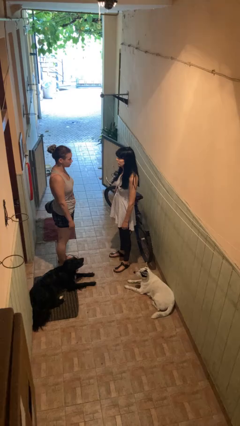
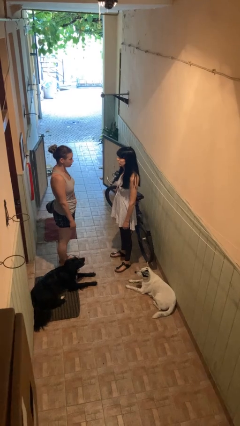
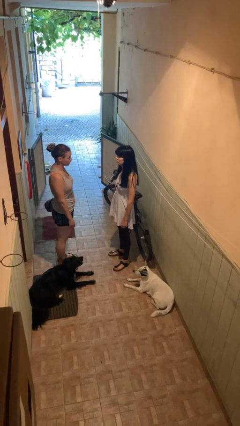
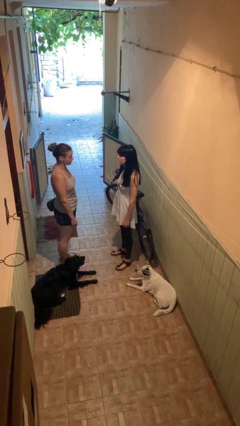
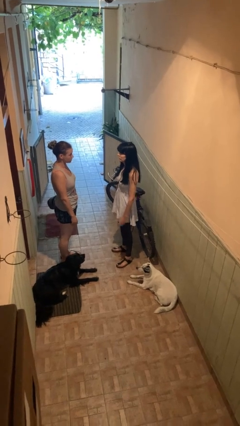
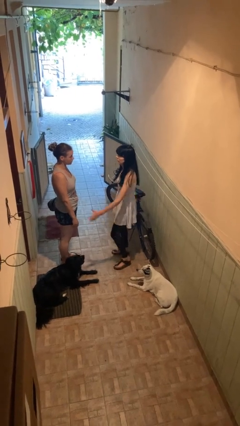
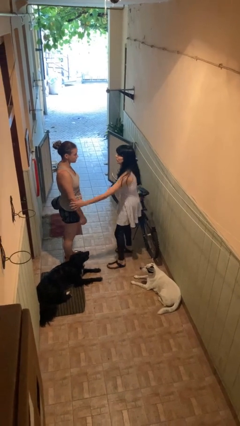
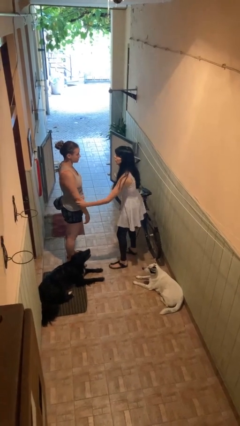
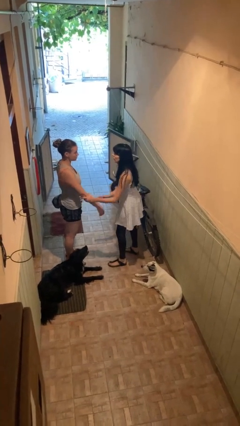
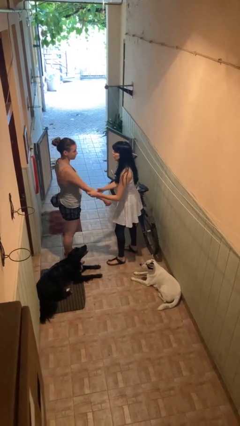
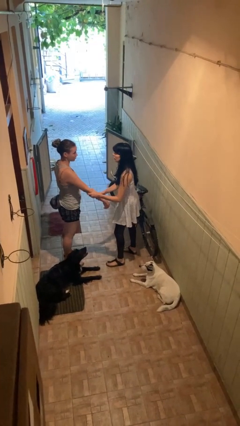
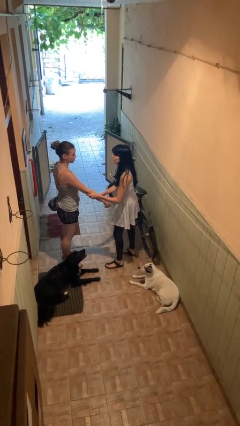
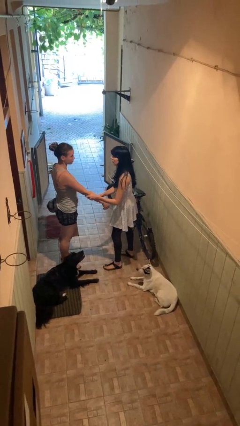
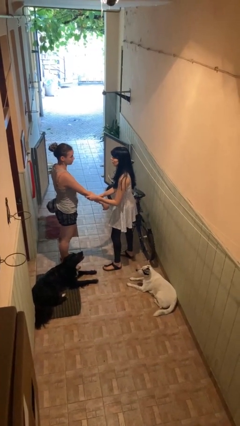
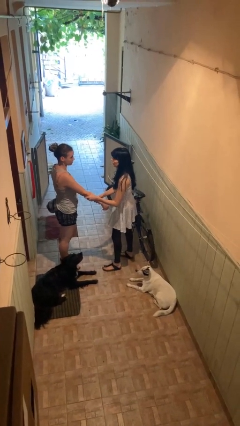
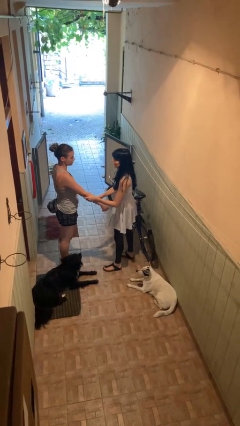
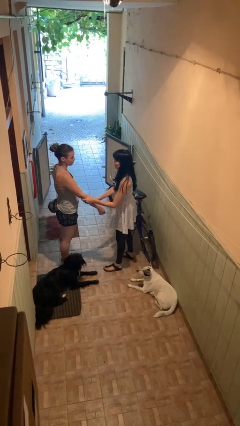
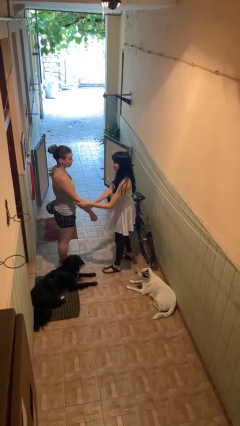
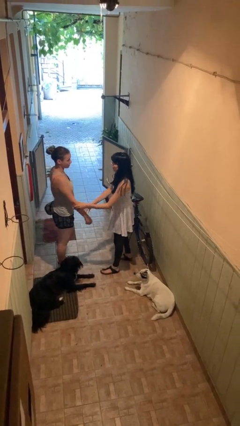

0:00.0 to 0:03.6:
person grabs person by forearm

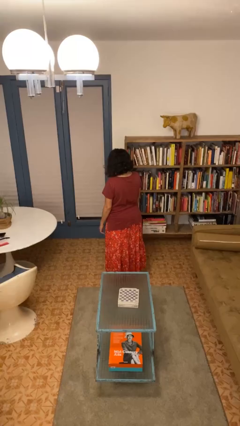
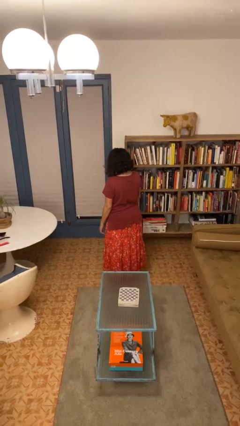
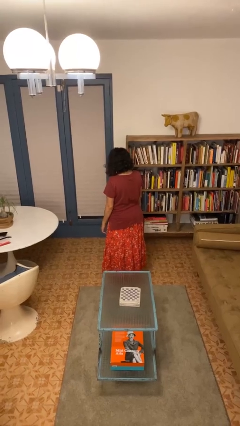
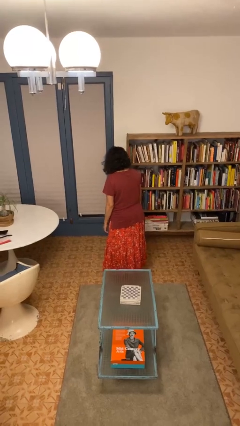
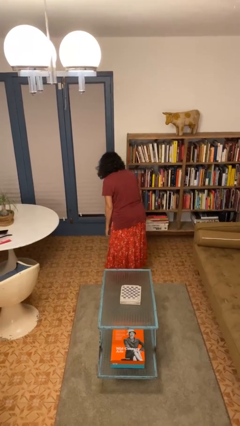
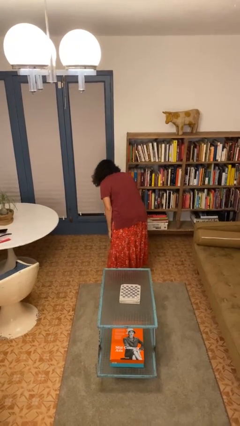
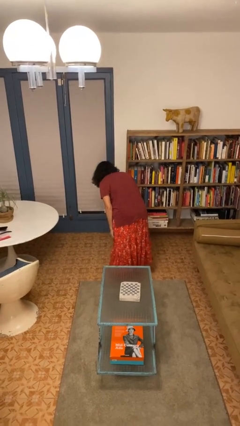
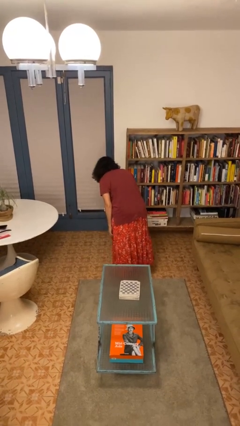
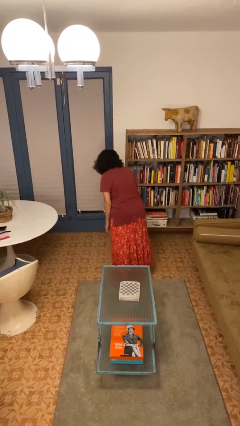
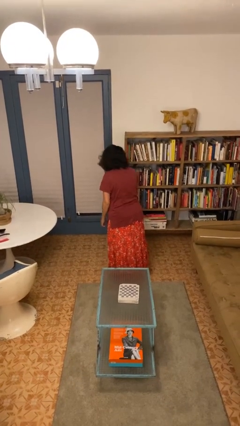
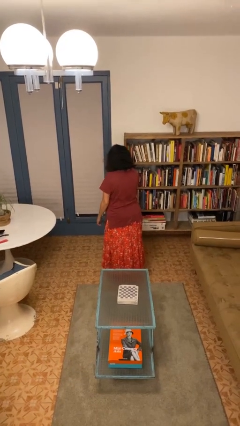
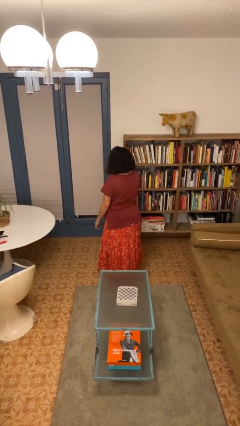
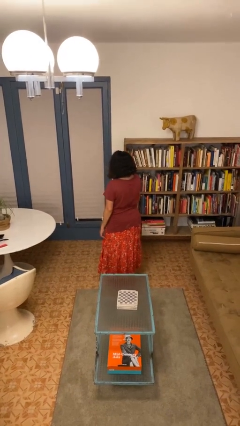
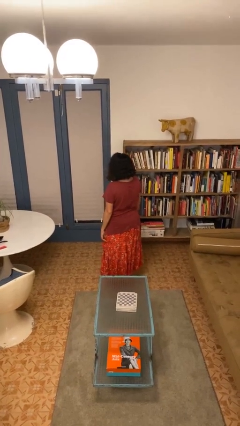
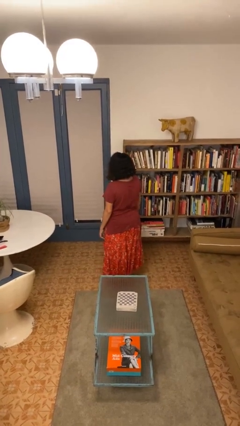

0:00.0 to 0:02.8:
person bows

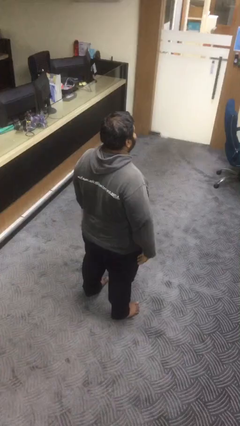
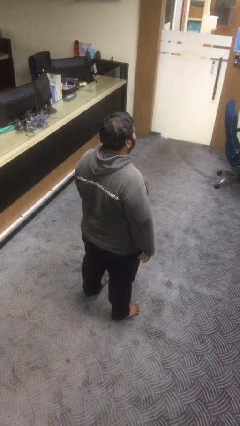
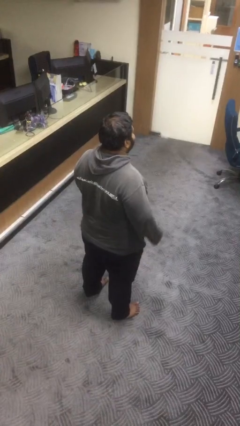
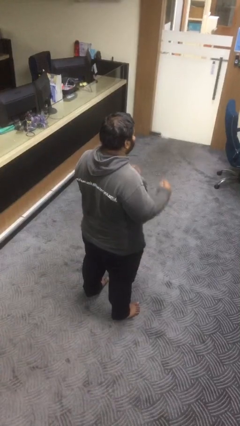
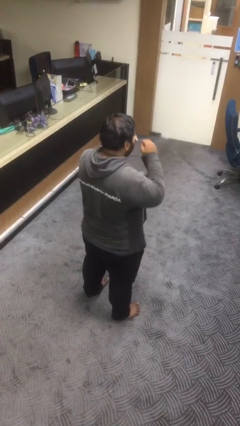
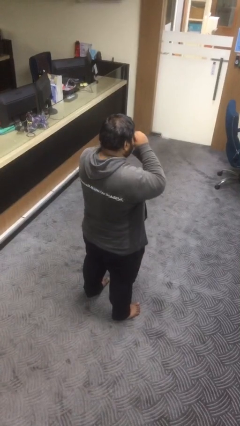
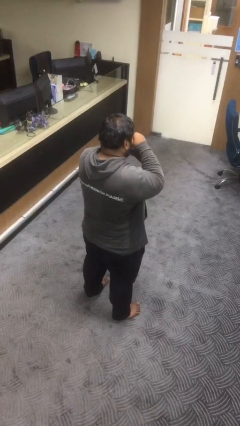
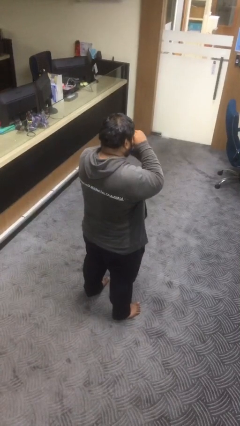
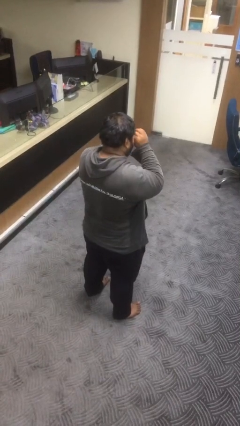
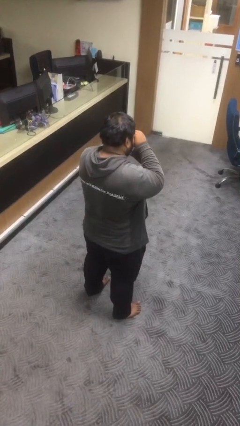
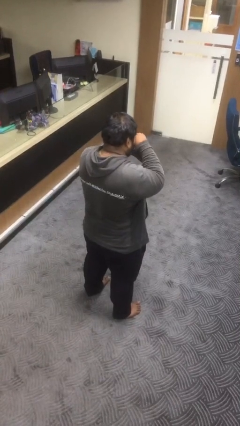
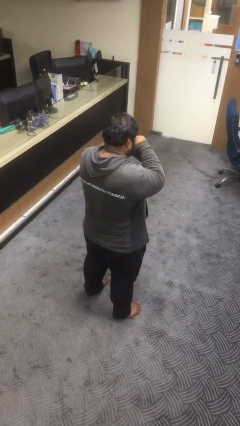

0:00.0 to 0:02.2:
person rubs eyes

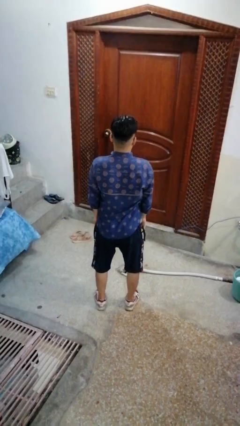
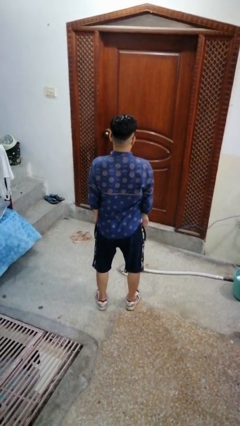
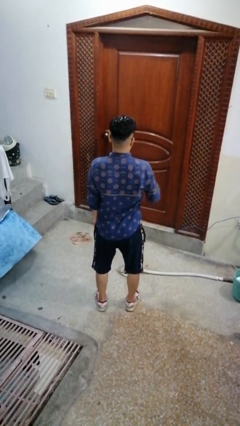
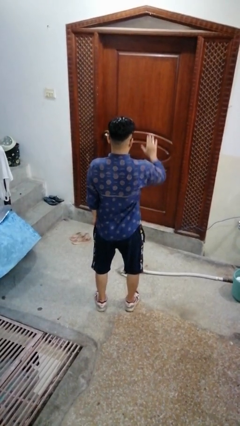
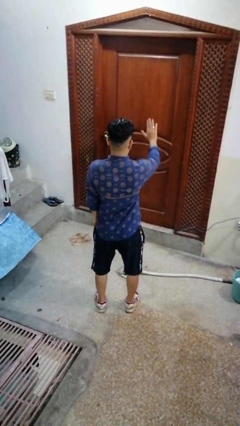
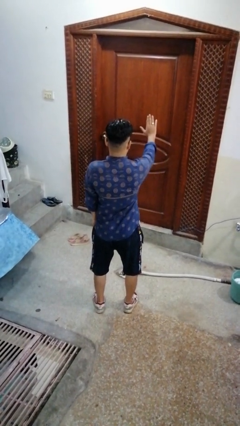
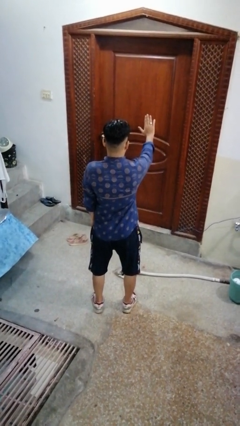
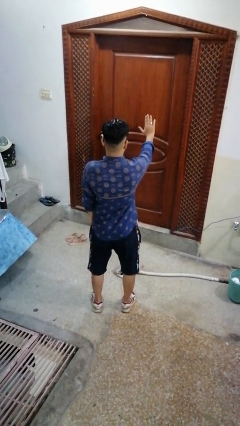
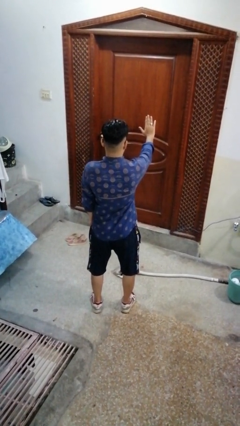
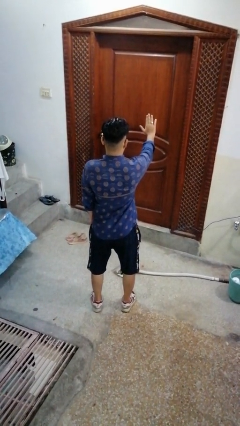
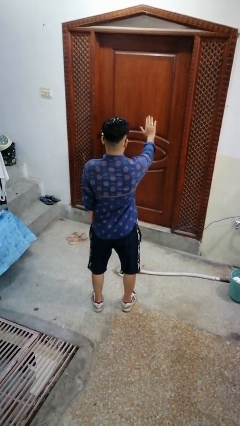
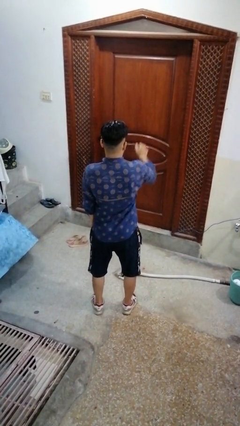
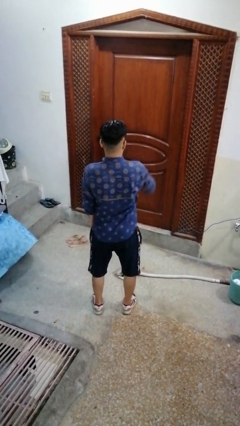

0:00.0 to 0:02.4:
person gestures stop

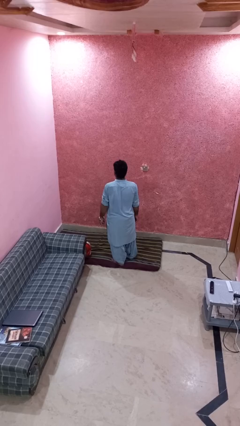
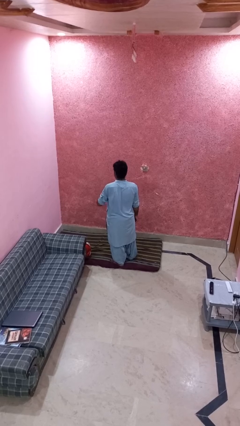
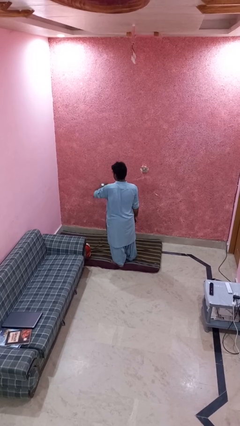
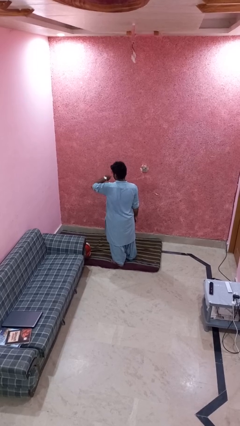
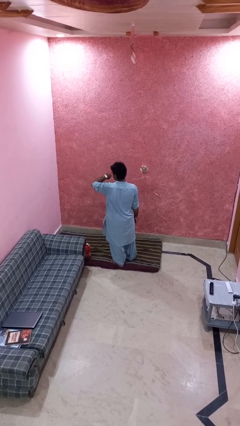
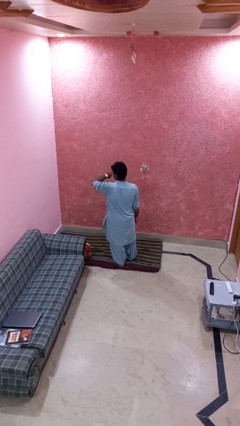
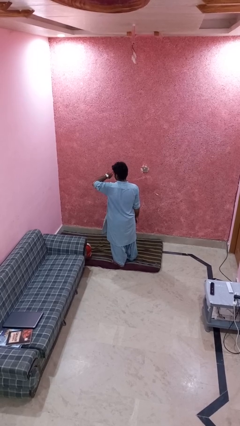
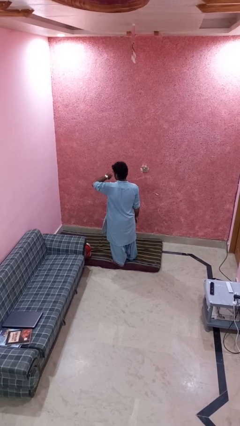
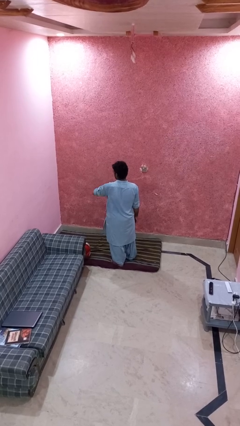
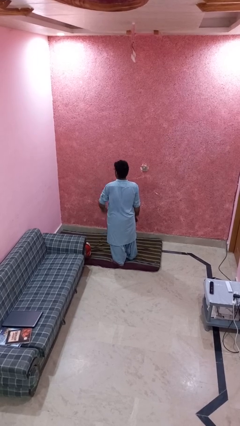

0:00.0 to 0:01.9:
person looks at wristwatch

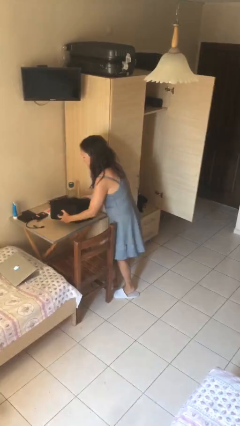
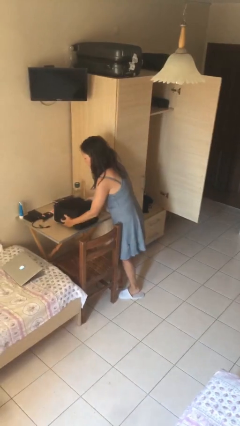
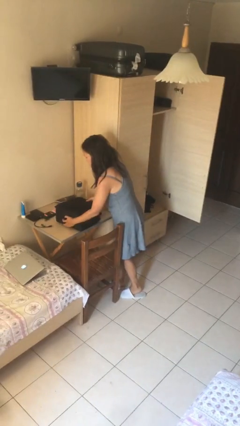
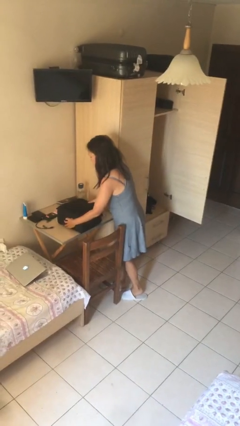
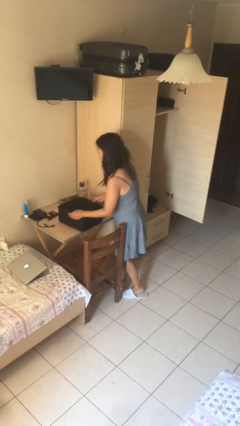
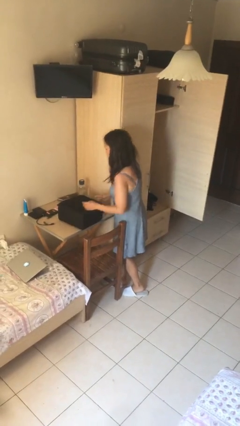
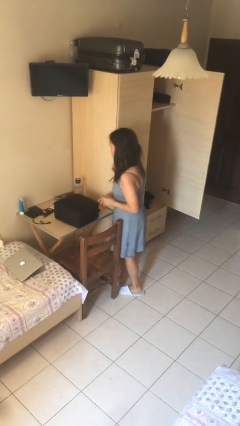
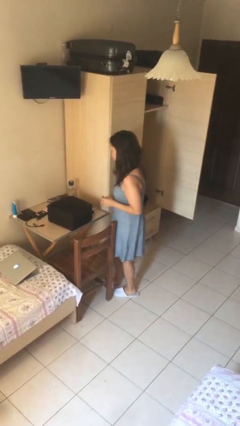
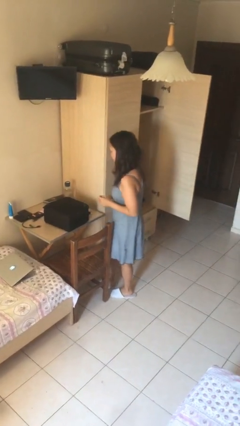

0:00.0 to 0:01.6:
person puts down object on table

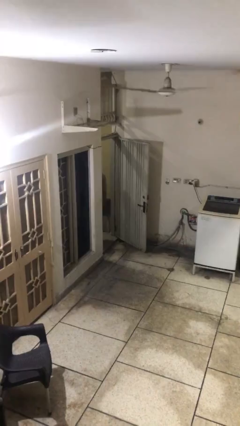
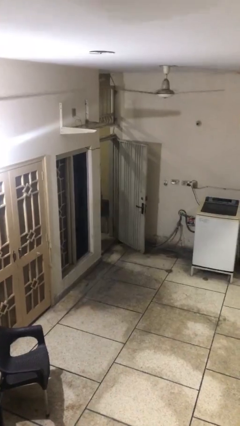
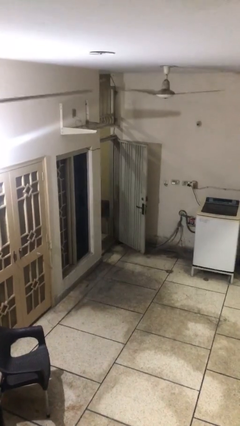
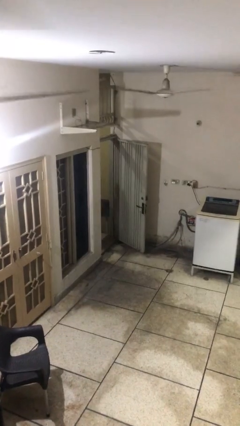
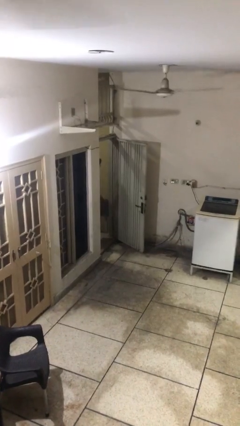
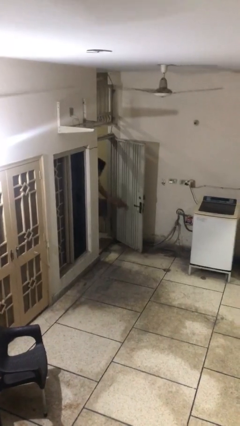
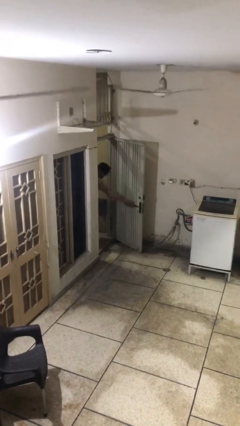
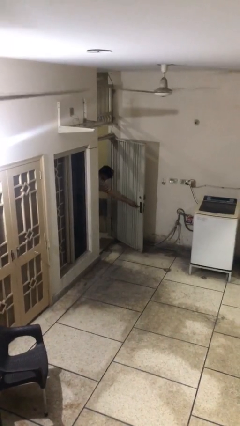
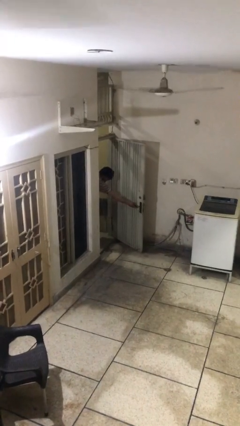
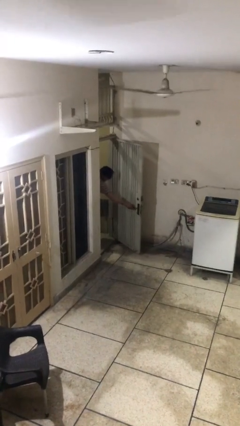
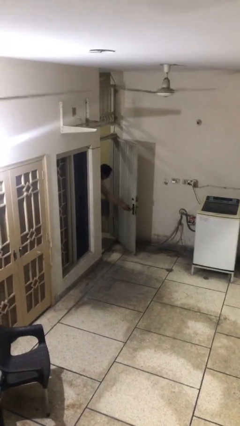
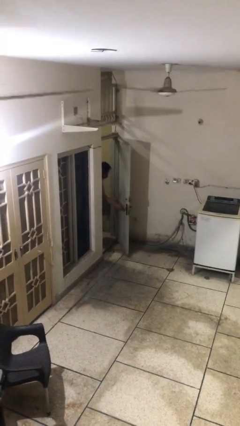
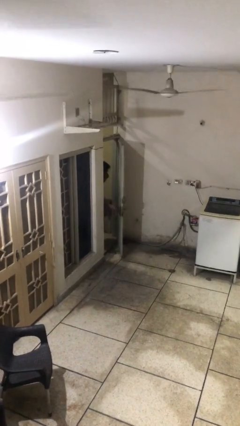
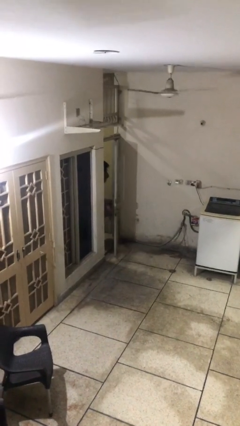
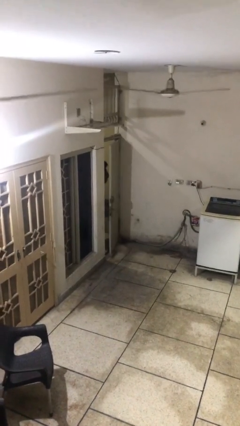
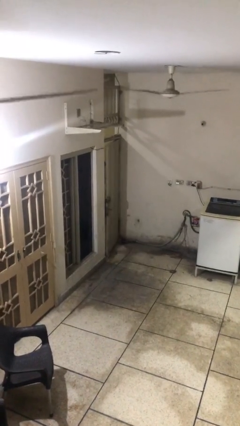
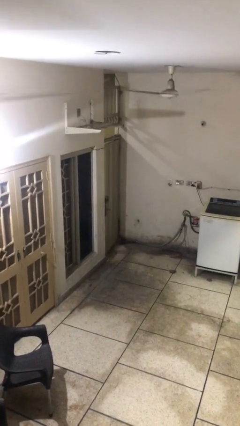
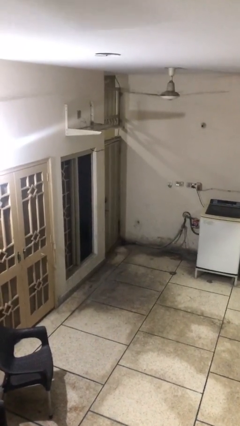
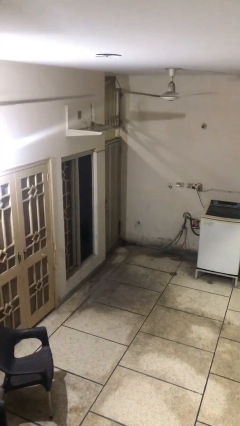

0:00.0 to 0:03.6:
person closes facility door
